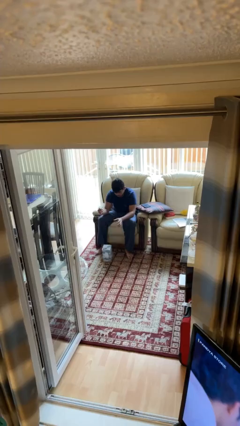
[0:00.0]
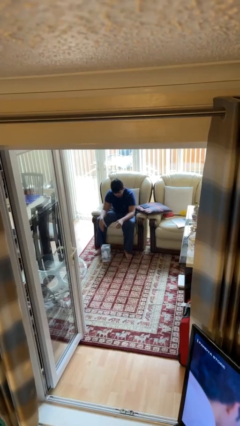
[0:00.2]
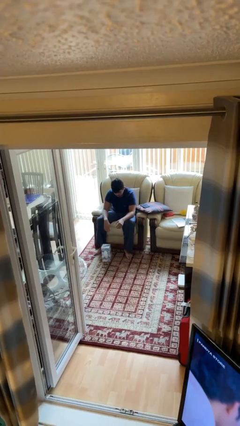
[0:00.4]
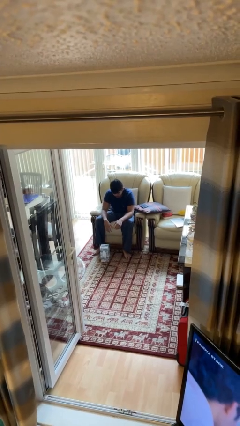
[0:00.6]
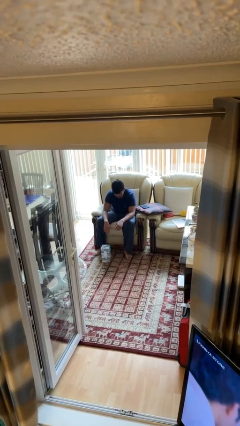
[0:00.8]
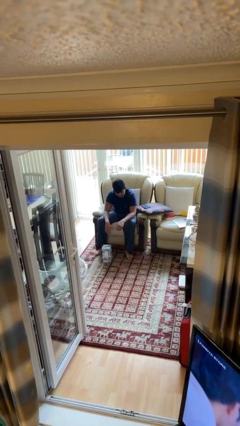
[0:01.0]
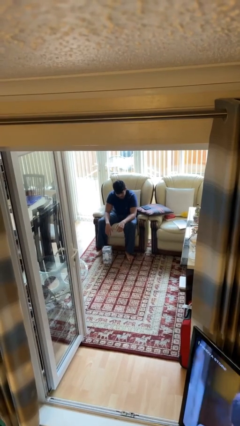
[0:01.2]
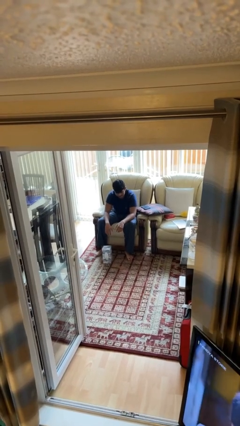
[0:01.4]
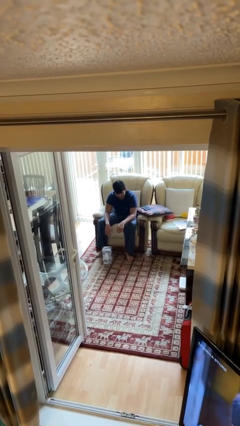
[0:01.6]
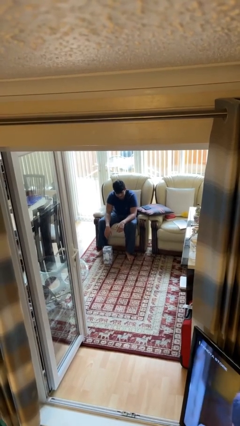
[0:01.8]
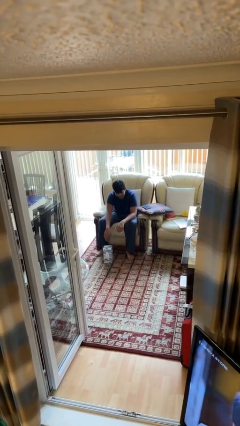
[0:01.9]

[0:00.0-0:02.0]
person drops object

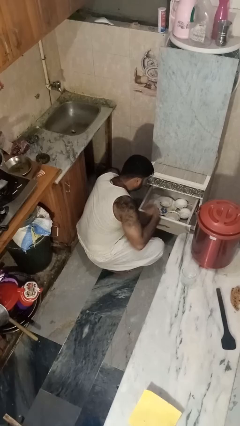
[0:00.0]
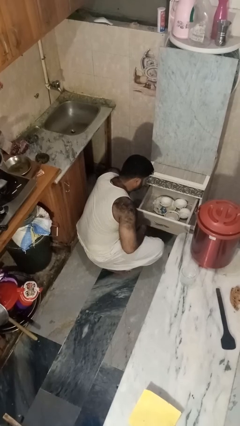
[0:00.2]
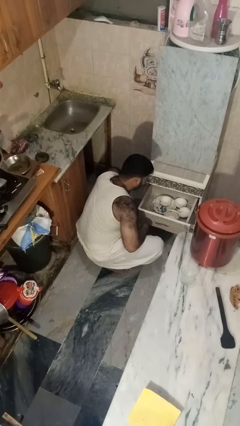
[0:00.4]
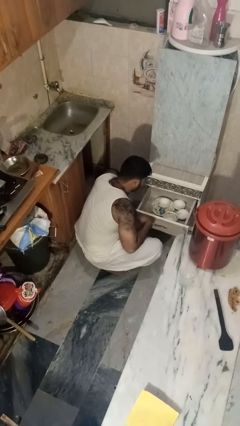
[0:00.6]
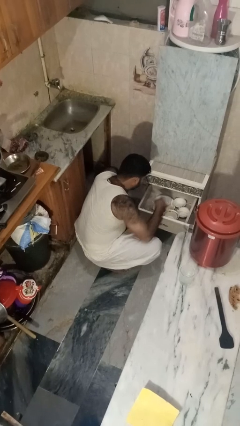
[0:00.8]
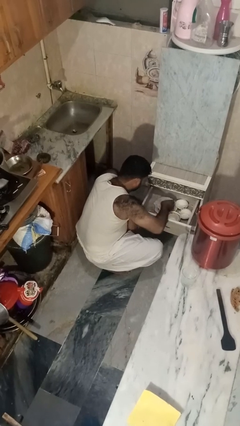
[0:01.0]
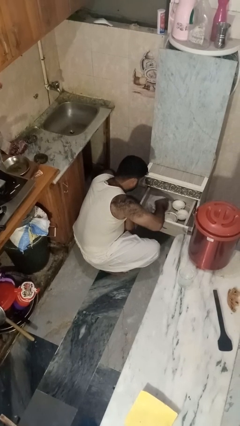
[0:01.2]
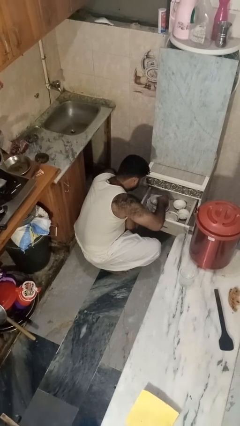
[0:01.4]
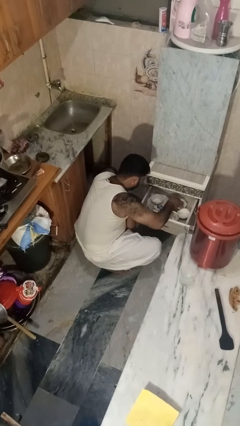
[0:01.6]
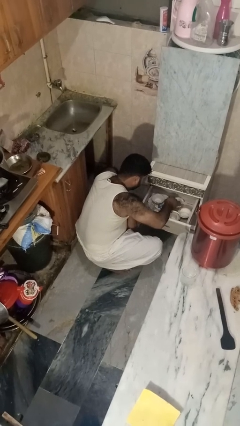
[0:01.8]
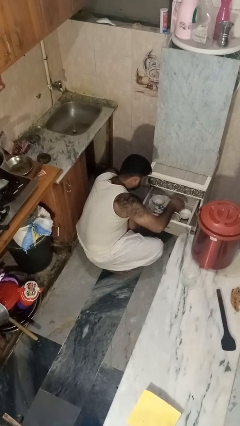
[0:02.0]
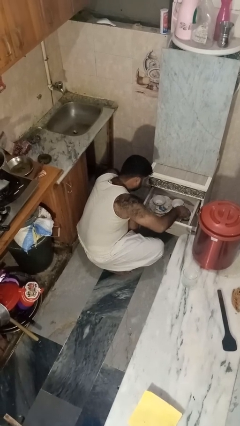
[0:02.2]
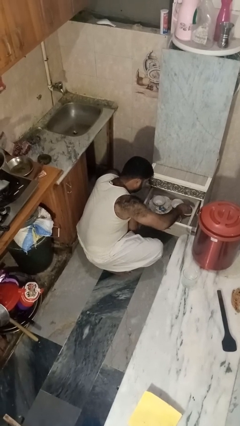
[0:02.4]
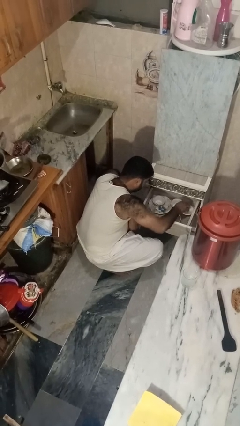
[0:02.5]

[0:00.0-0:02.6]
person searches in kitchen drawer

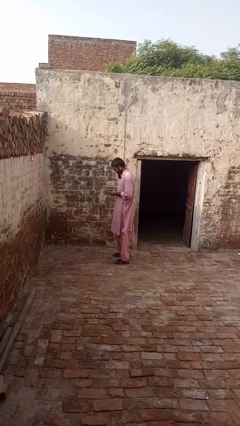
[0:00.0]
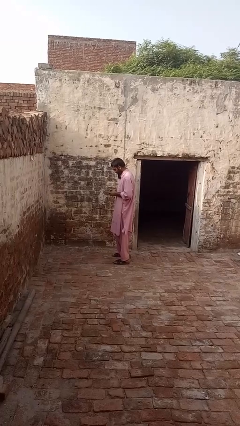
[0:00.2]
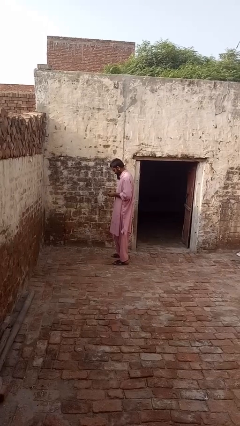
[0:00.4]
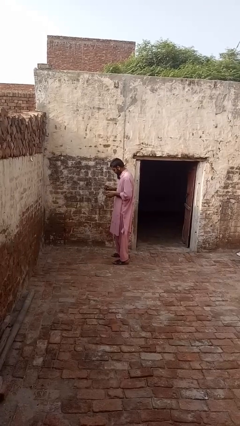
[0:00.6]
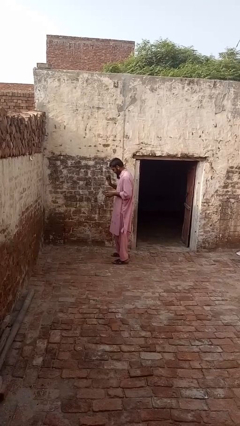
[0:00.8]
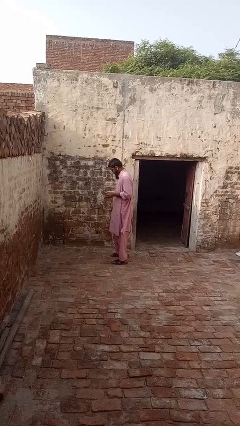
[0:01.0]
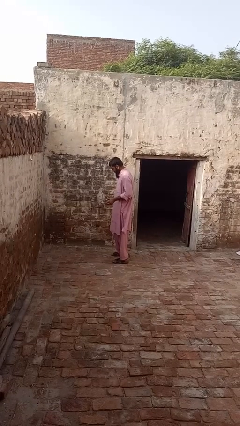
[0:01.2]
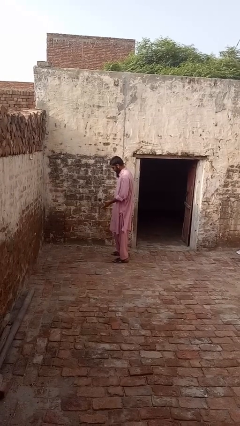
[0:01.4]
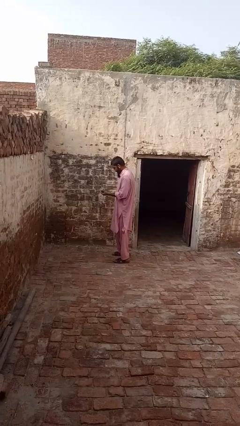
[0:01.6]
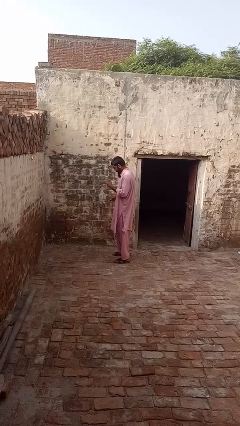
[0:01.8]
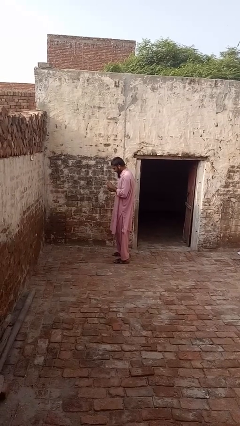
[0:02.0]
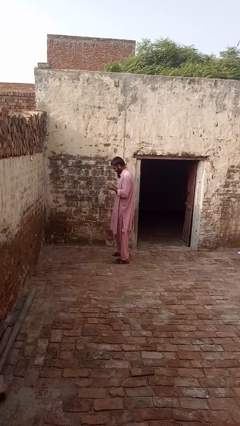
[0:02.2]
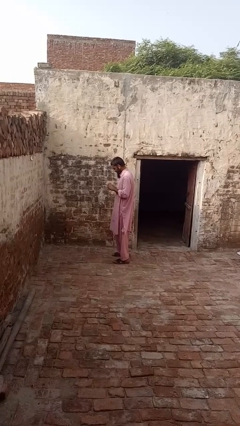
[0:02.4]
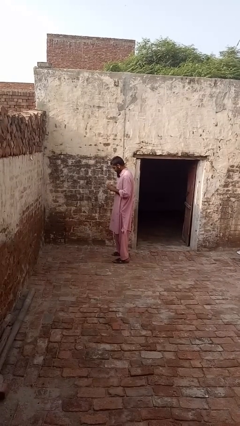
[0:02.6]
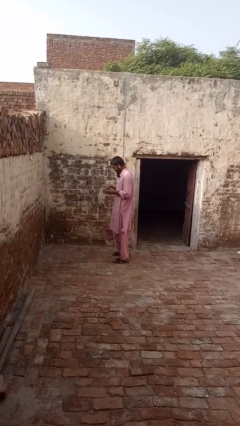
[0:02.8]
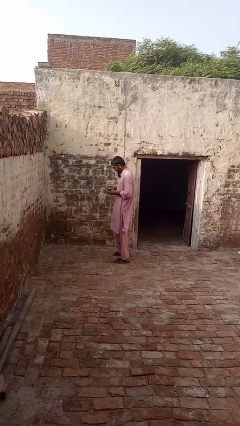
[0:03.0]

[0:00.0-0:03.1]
person bounces ball on floor

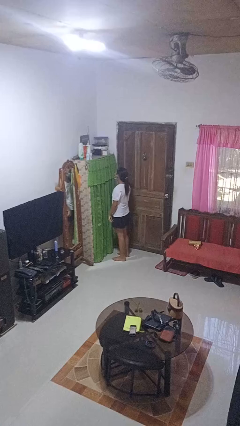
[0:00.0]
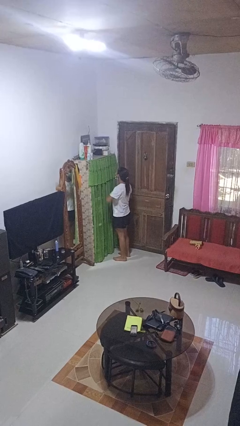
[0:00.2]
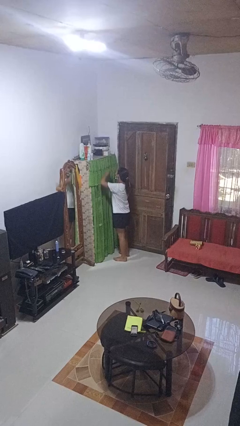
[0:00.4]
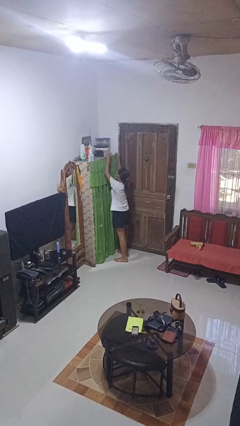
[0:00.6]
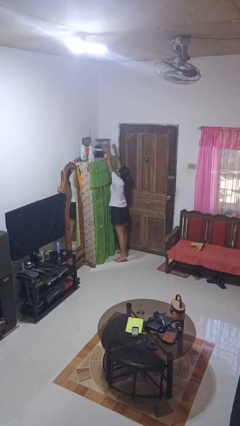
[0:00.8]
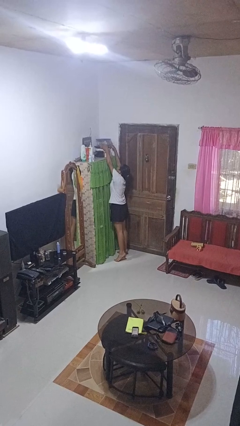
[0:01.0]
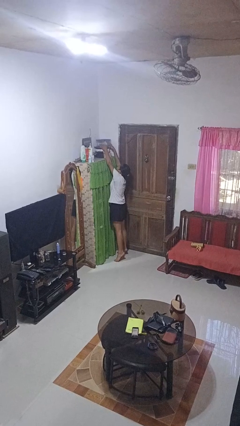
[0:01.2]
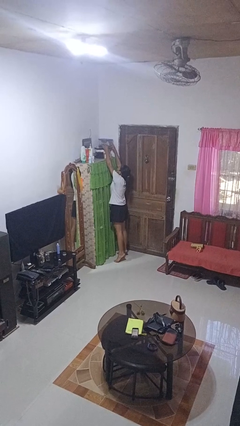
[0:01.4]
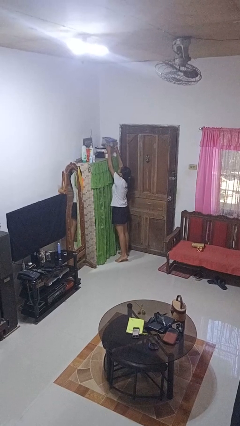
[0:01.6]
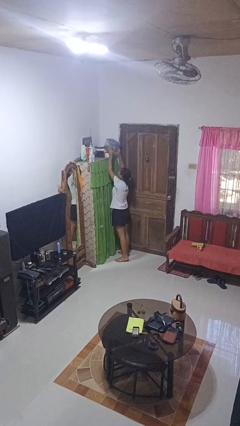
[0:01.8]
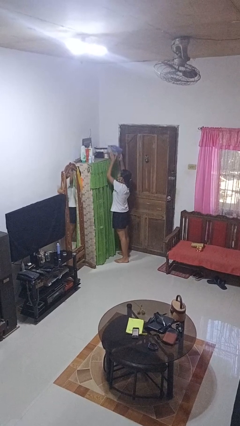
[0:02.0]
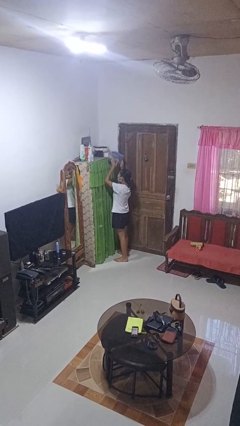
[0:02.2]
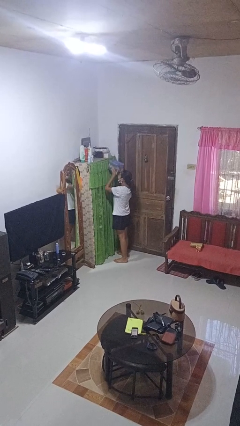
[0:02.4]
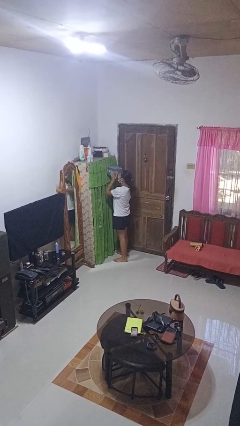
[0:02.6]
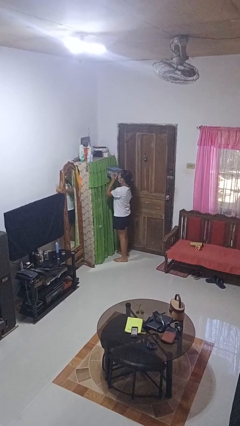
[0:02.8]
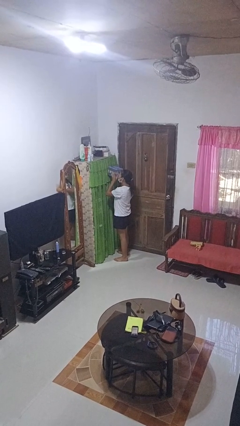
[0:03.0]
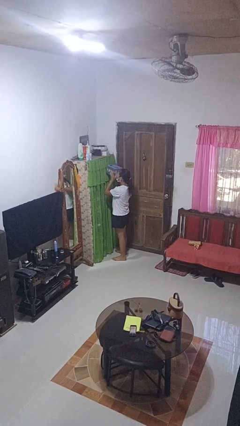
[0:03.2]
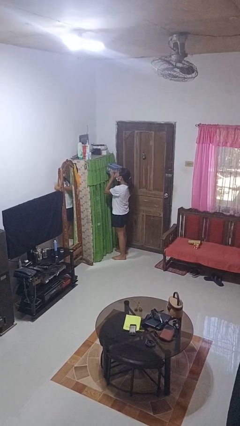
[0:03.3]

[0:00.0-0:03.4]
person picks up object from shelf

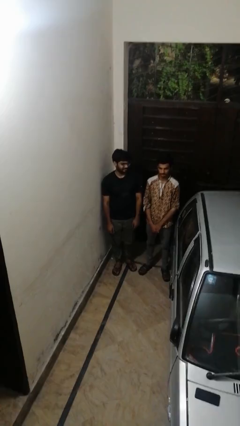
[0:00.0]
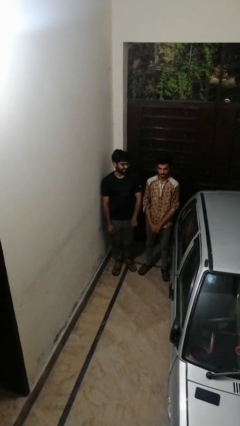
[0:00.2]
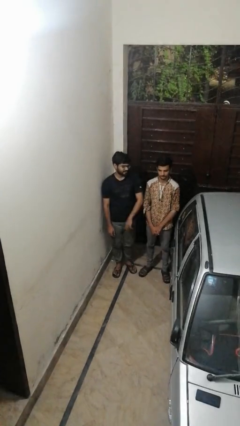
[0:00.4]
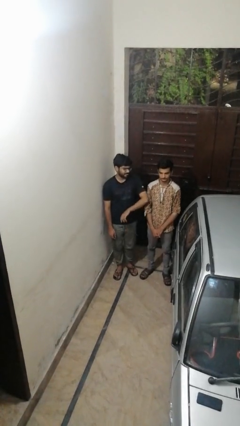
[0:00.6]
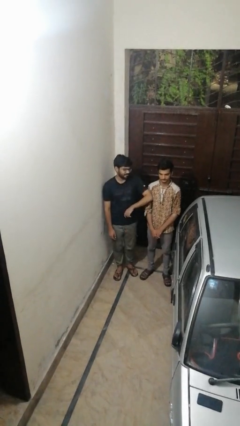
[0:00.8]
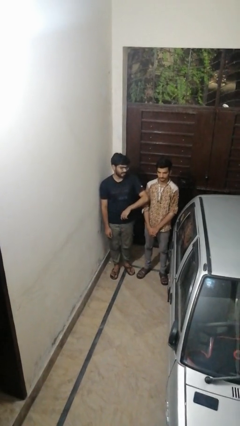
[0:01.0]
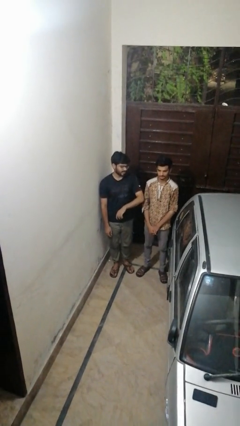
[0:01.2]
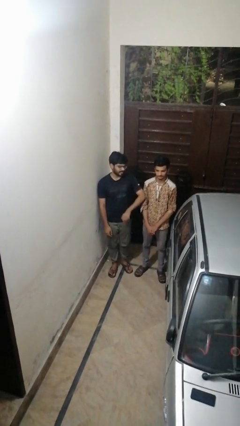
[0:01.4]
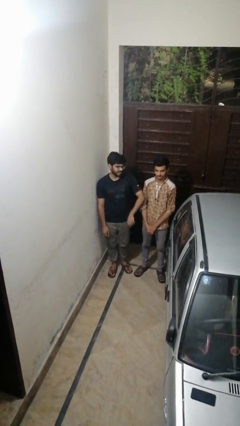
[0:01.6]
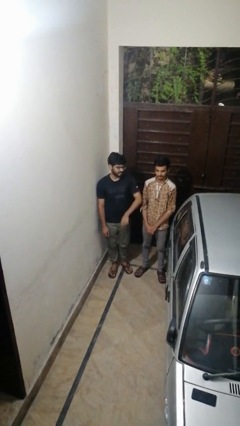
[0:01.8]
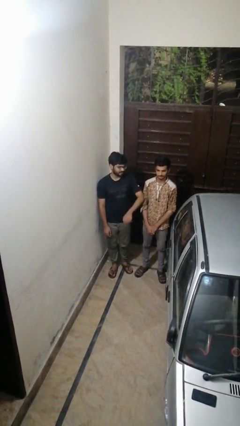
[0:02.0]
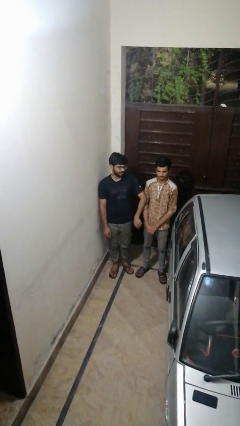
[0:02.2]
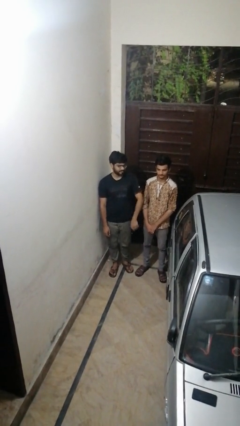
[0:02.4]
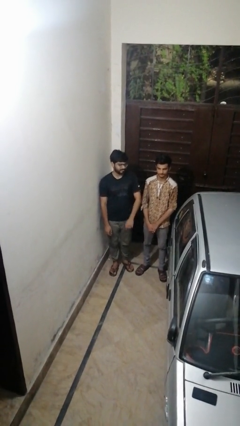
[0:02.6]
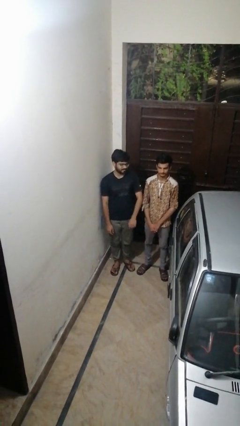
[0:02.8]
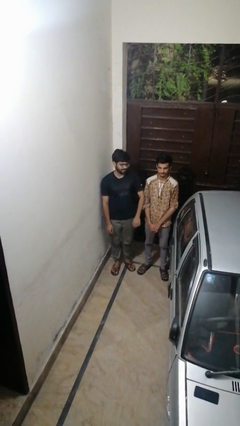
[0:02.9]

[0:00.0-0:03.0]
person nudges person with elbow

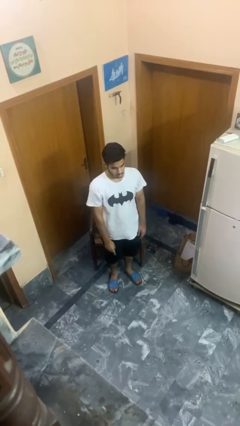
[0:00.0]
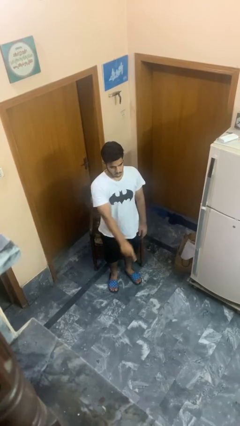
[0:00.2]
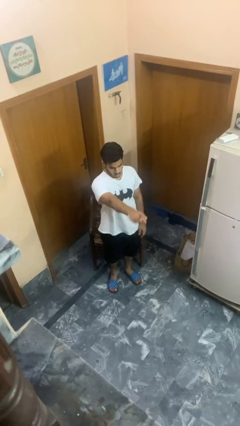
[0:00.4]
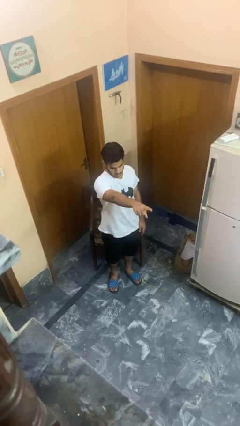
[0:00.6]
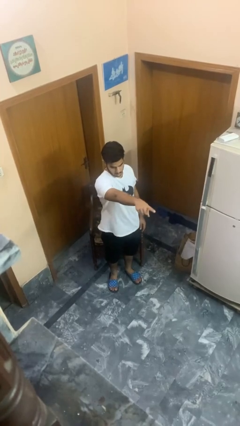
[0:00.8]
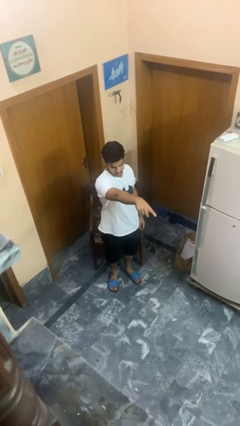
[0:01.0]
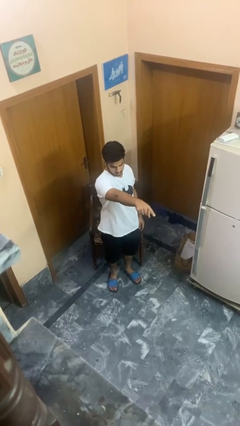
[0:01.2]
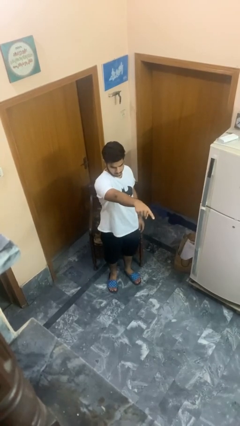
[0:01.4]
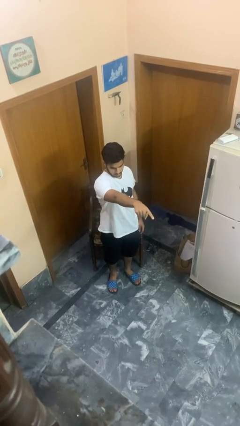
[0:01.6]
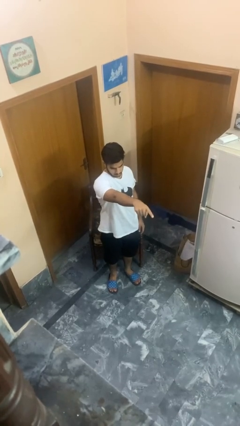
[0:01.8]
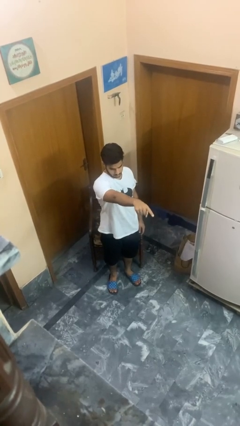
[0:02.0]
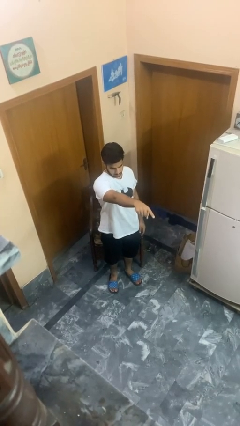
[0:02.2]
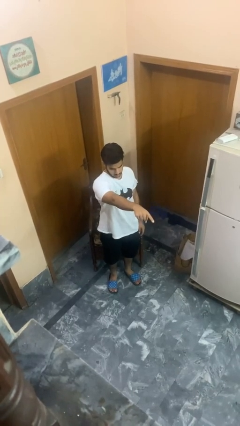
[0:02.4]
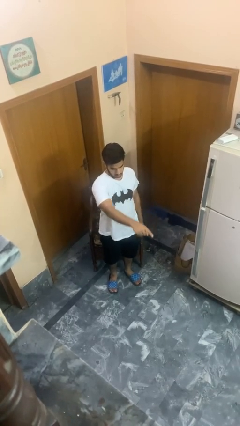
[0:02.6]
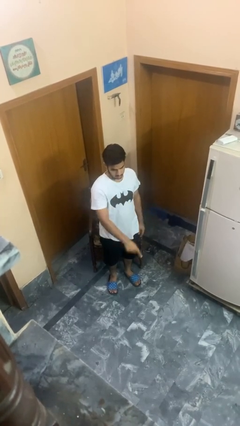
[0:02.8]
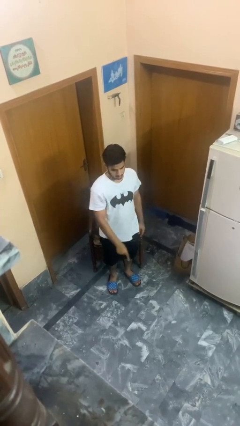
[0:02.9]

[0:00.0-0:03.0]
person points at person

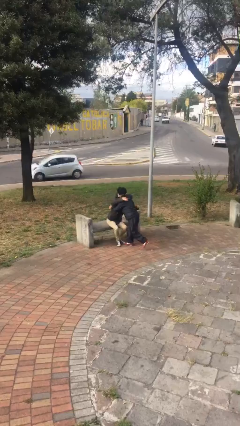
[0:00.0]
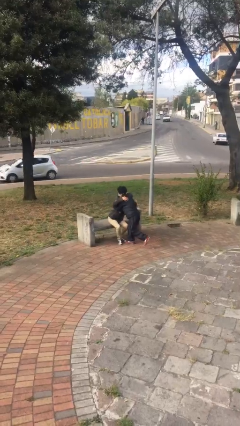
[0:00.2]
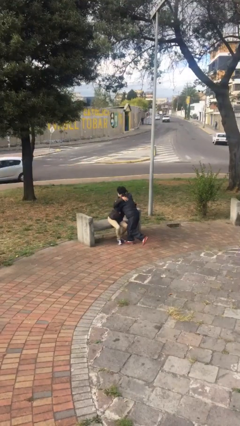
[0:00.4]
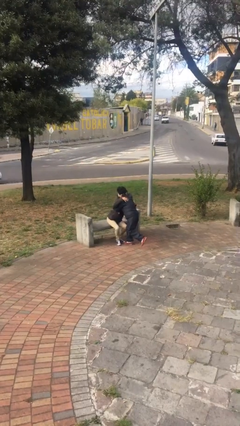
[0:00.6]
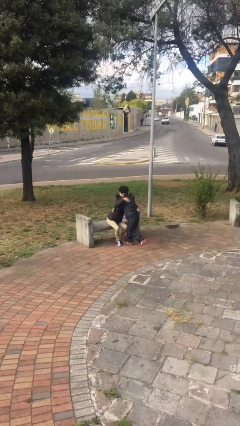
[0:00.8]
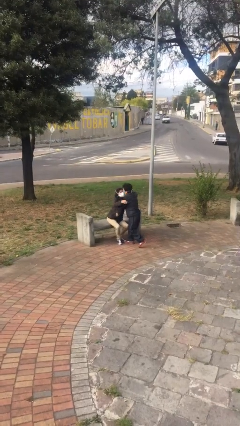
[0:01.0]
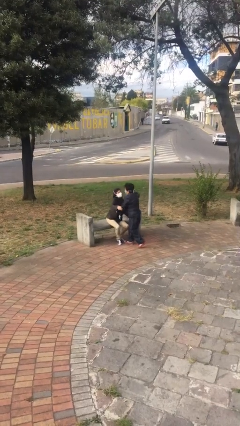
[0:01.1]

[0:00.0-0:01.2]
person embraces person
